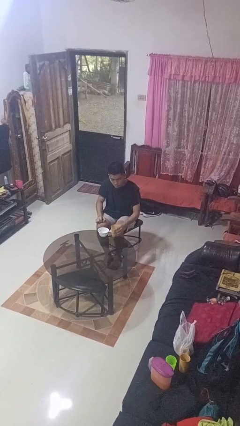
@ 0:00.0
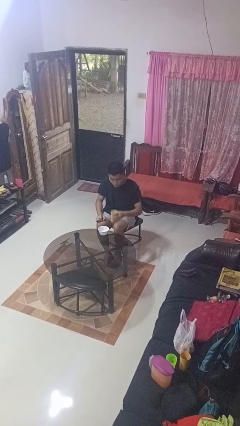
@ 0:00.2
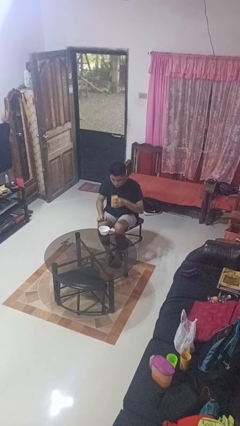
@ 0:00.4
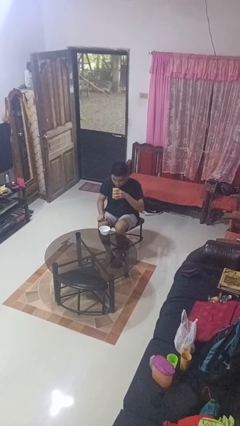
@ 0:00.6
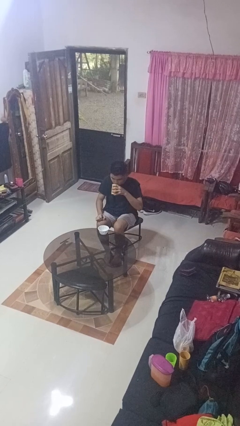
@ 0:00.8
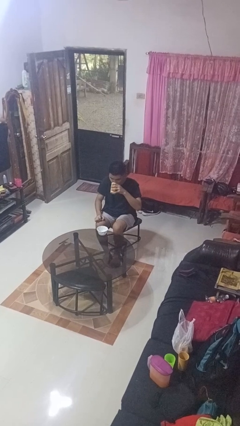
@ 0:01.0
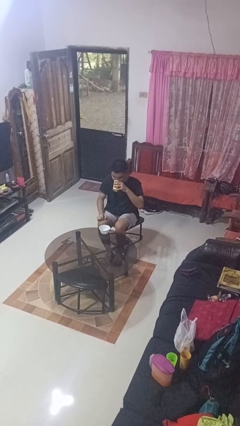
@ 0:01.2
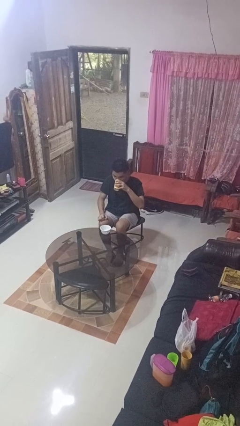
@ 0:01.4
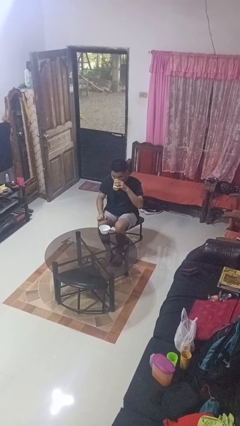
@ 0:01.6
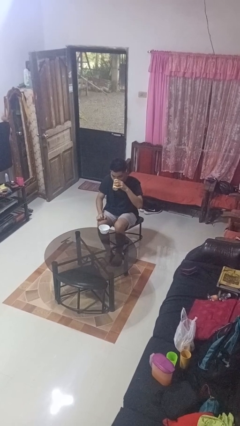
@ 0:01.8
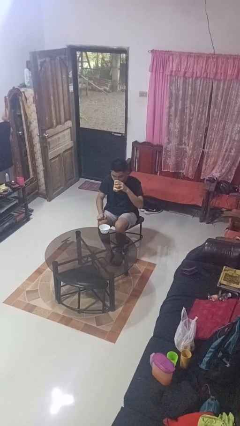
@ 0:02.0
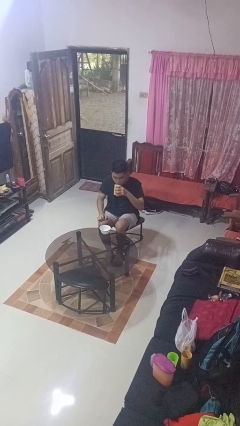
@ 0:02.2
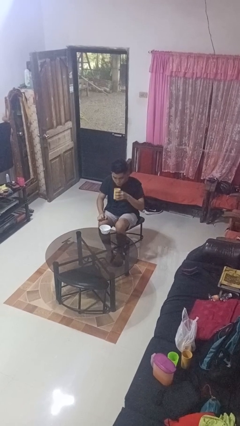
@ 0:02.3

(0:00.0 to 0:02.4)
person drinks from cup

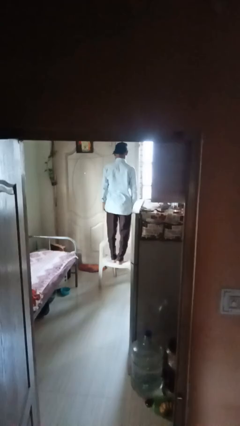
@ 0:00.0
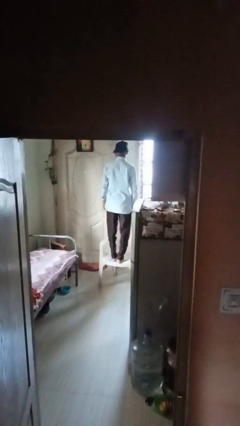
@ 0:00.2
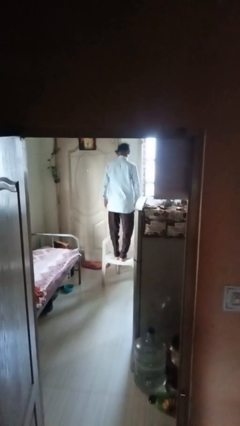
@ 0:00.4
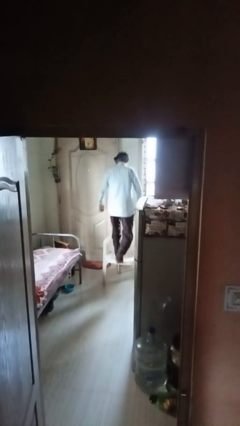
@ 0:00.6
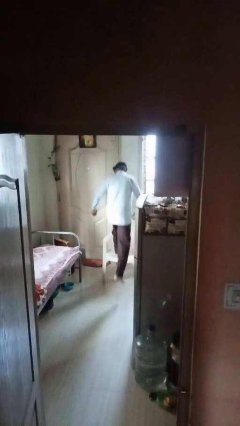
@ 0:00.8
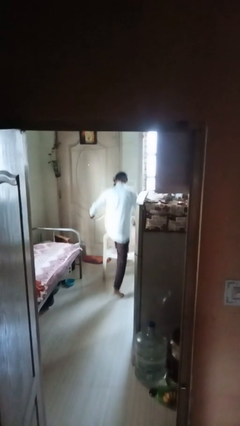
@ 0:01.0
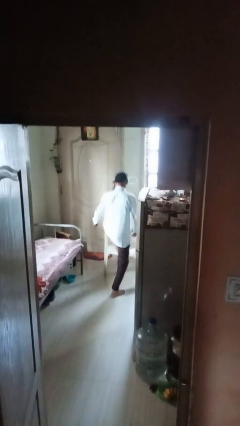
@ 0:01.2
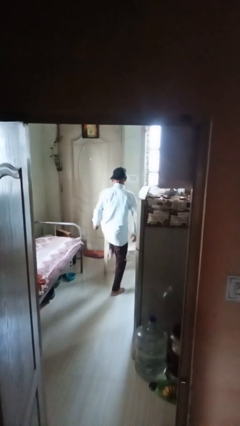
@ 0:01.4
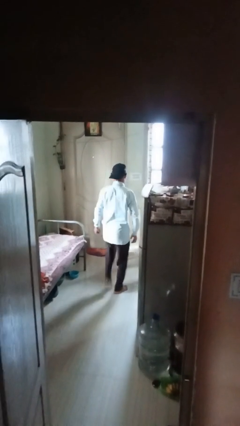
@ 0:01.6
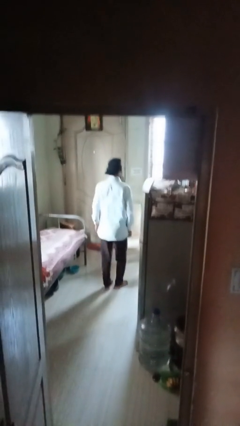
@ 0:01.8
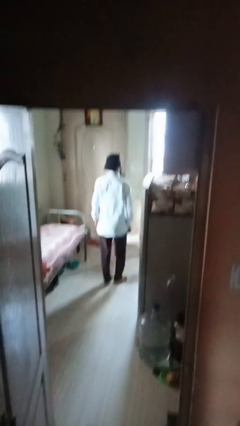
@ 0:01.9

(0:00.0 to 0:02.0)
person climbs off chair

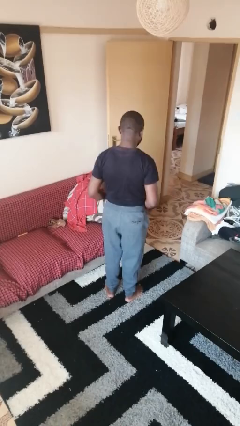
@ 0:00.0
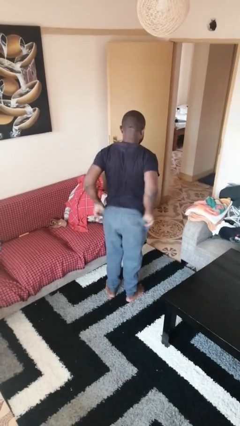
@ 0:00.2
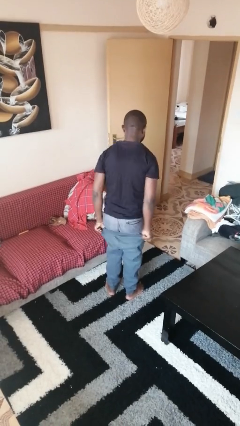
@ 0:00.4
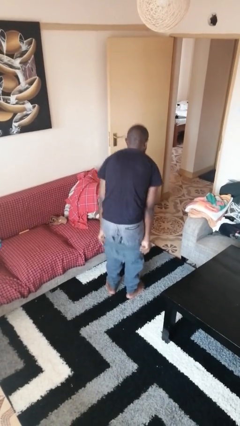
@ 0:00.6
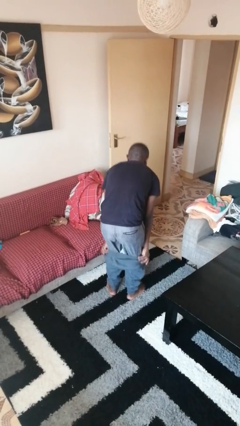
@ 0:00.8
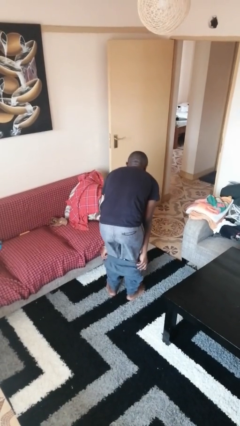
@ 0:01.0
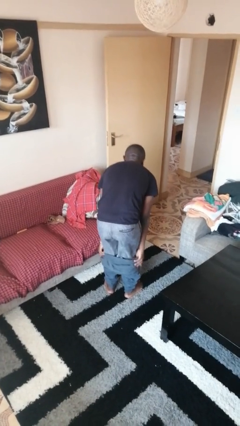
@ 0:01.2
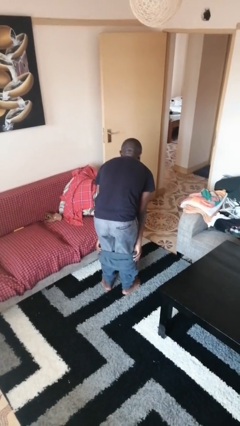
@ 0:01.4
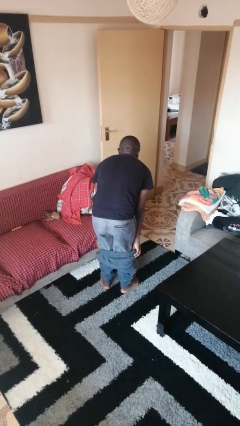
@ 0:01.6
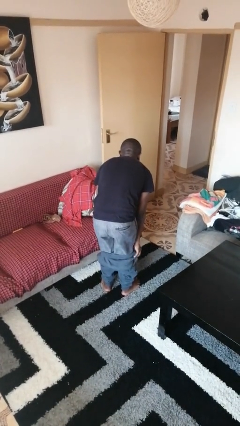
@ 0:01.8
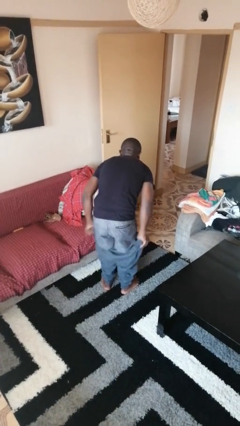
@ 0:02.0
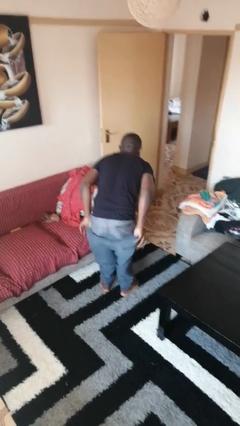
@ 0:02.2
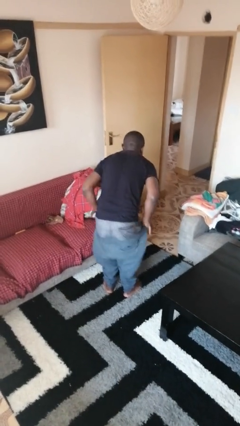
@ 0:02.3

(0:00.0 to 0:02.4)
person takes off pants

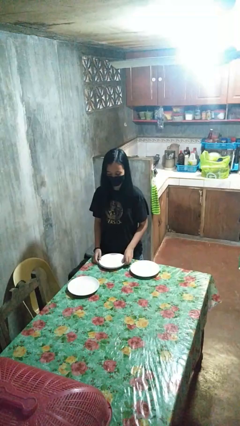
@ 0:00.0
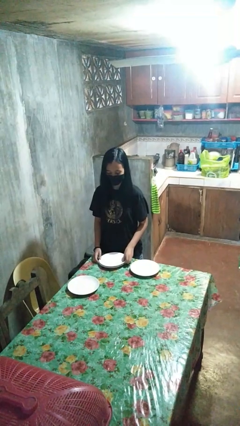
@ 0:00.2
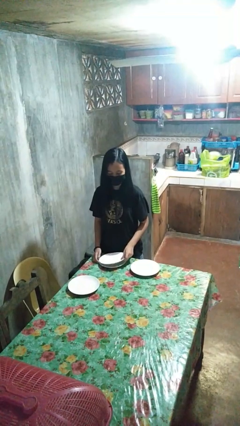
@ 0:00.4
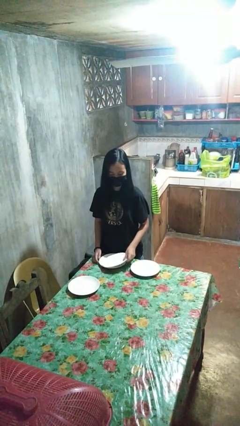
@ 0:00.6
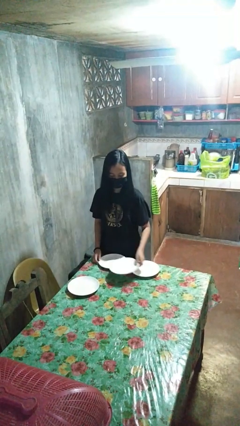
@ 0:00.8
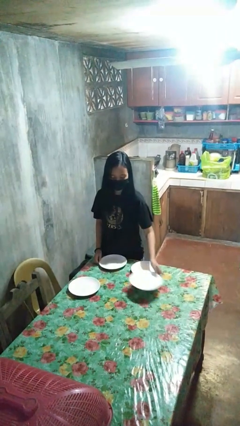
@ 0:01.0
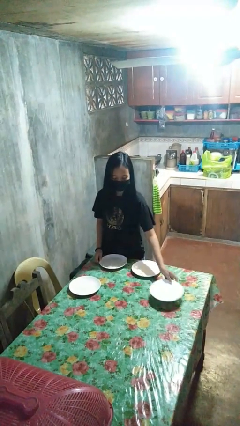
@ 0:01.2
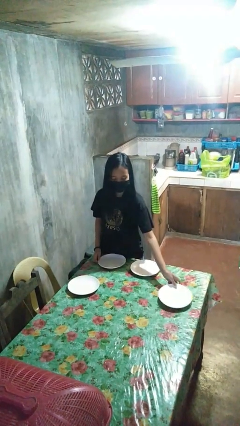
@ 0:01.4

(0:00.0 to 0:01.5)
person sets table

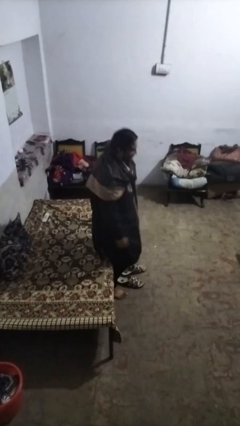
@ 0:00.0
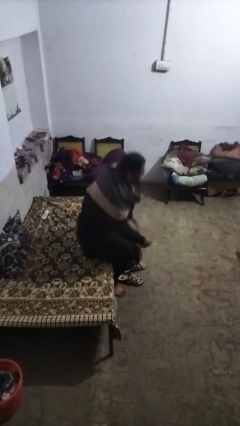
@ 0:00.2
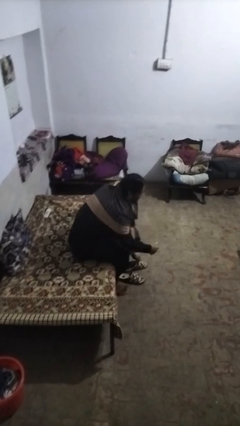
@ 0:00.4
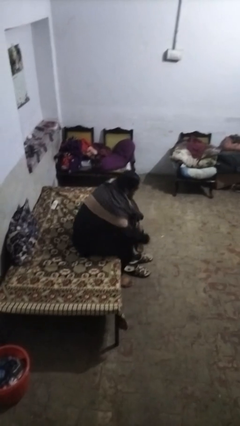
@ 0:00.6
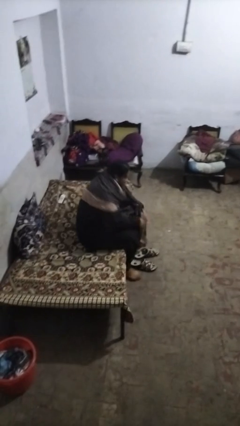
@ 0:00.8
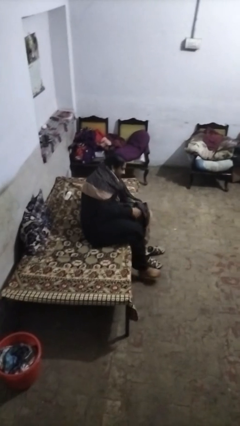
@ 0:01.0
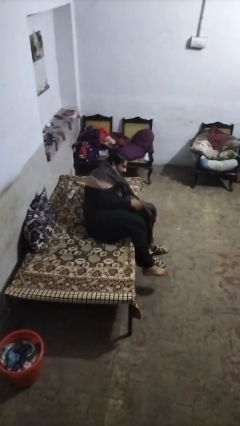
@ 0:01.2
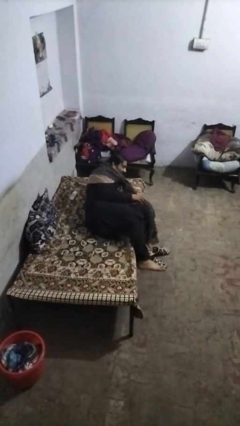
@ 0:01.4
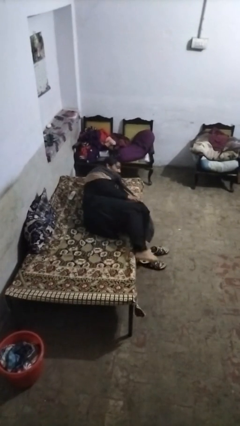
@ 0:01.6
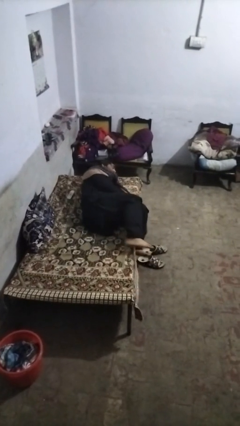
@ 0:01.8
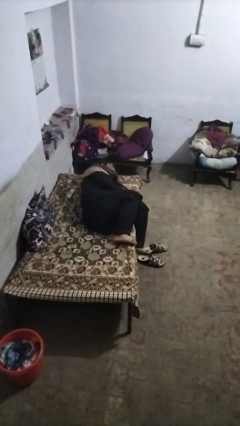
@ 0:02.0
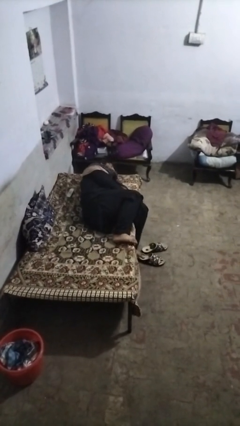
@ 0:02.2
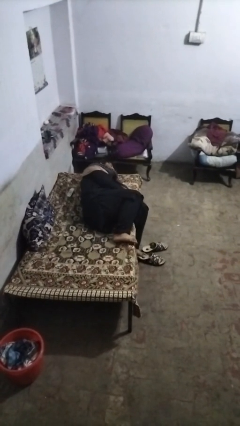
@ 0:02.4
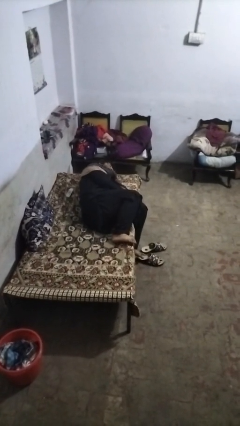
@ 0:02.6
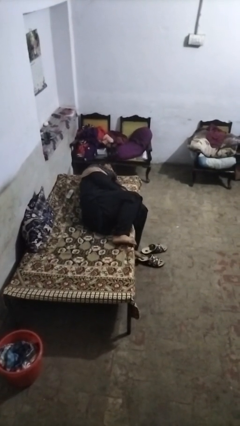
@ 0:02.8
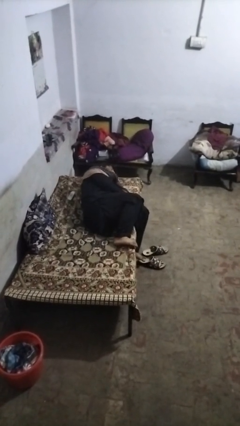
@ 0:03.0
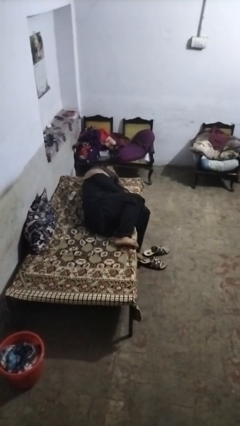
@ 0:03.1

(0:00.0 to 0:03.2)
person lies down on bed

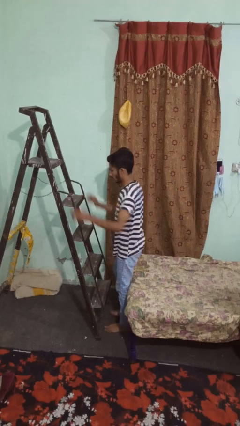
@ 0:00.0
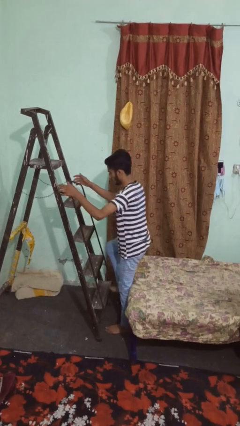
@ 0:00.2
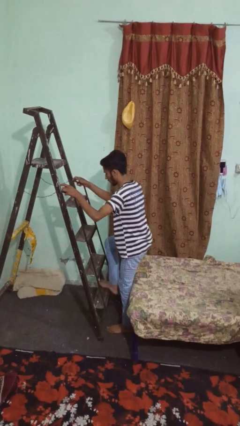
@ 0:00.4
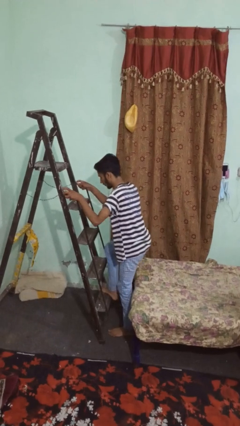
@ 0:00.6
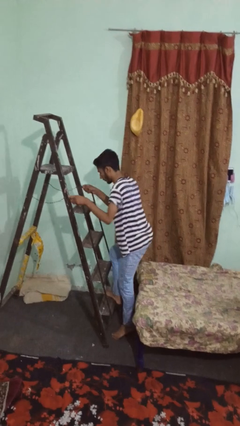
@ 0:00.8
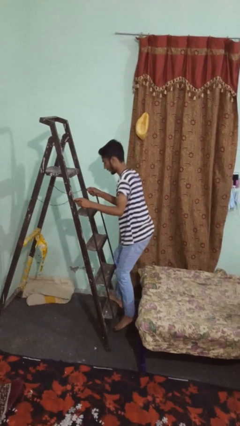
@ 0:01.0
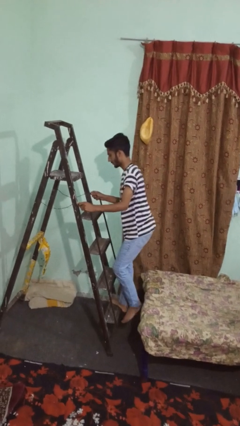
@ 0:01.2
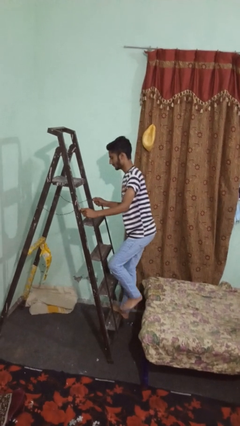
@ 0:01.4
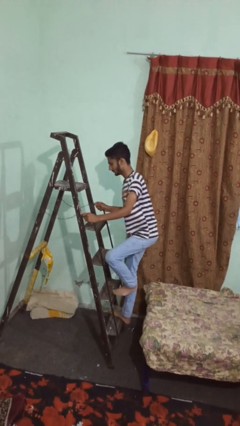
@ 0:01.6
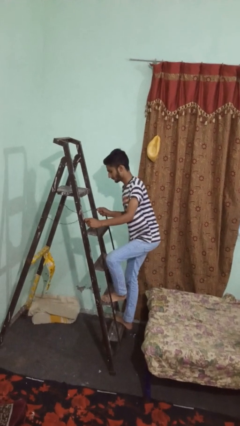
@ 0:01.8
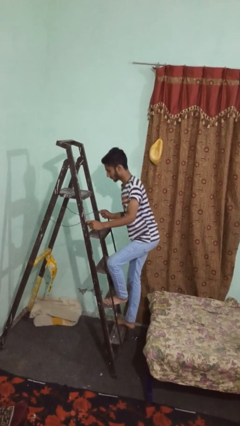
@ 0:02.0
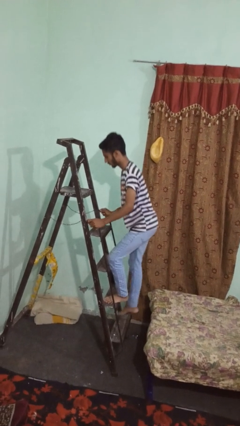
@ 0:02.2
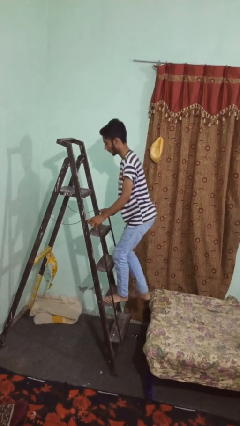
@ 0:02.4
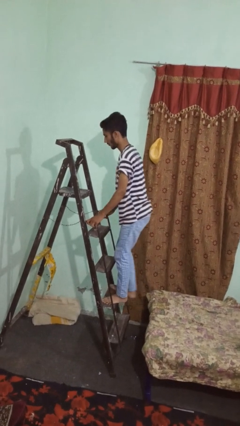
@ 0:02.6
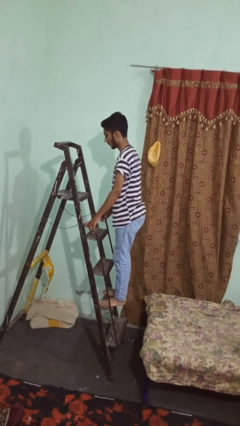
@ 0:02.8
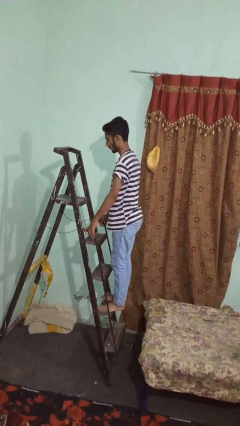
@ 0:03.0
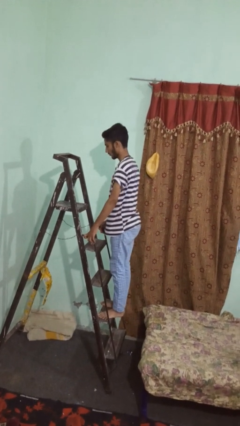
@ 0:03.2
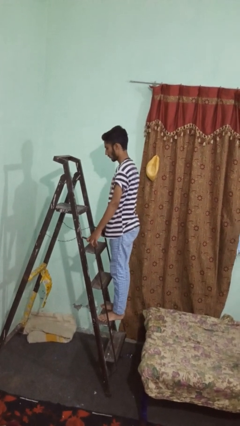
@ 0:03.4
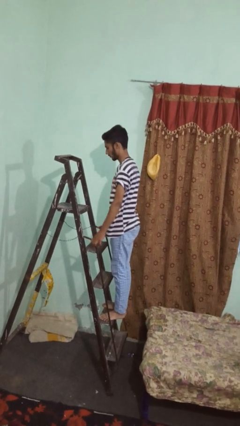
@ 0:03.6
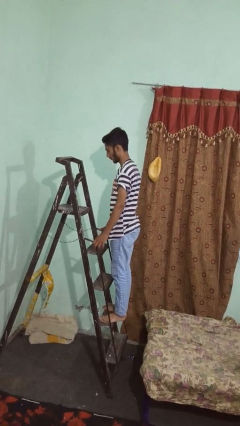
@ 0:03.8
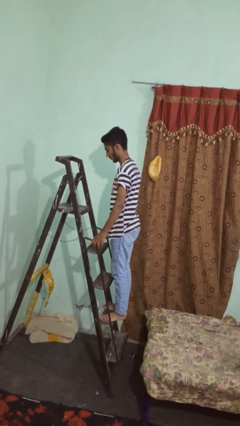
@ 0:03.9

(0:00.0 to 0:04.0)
person climbs up ladder

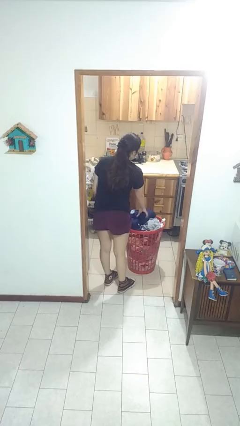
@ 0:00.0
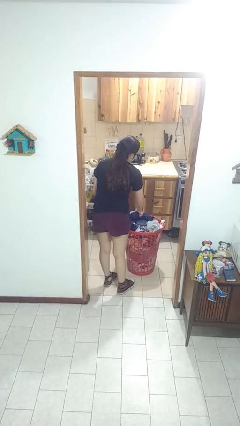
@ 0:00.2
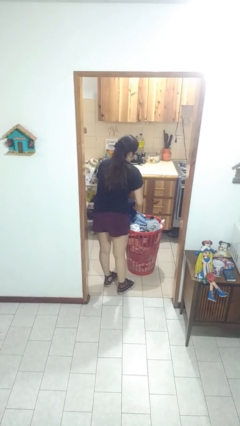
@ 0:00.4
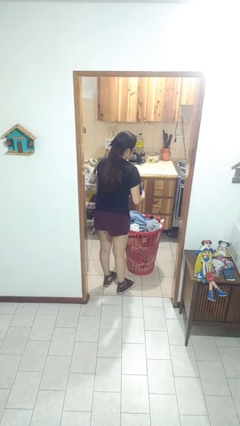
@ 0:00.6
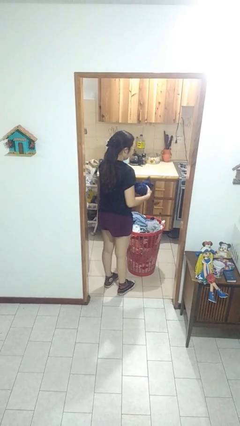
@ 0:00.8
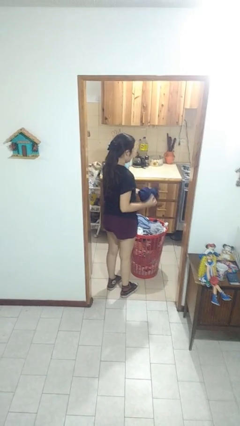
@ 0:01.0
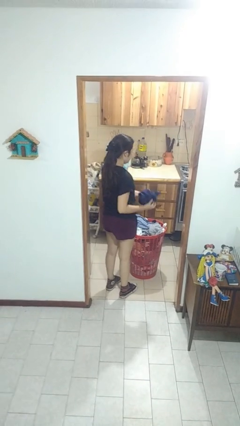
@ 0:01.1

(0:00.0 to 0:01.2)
person takes object from basket

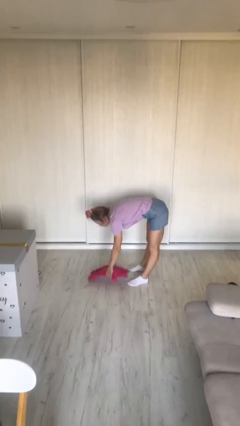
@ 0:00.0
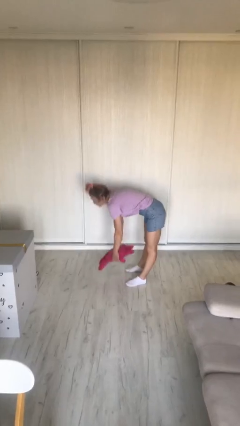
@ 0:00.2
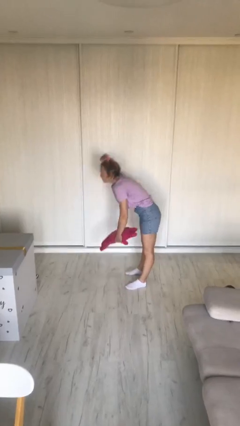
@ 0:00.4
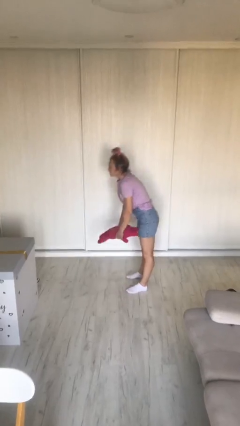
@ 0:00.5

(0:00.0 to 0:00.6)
person picks up object from floor
